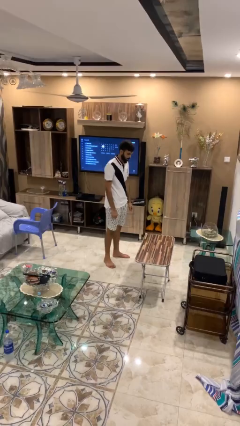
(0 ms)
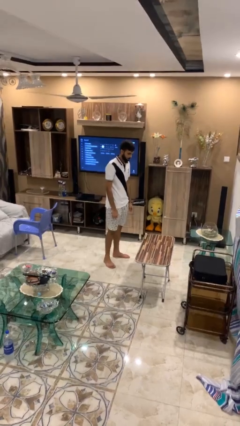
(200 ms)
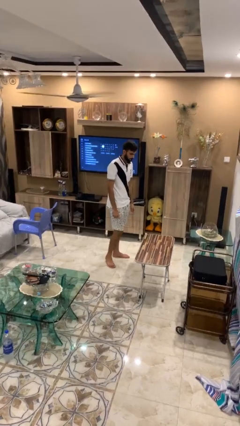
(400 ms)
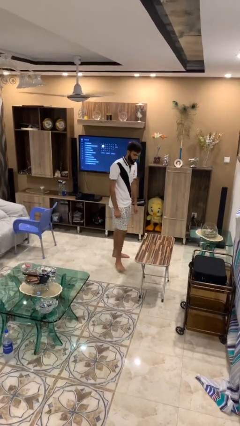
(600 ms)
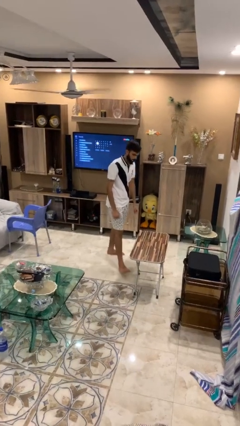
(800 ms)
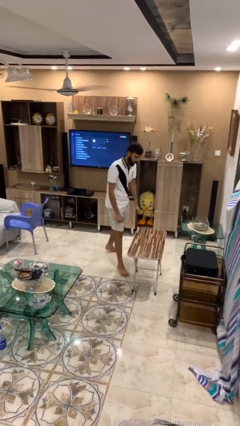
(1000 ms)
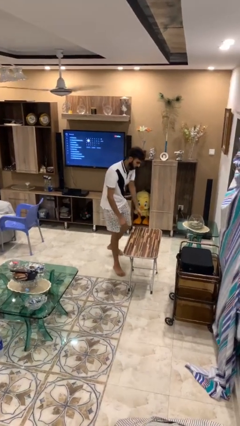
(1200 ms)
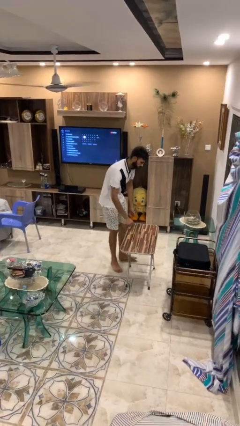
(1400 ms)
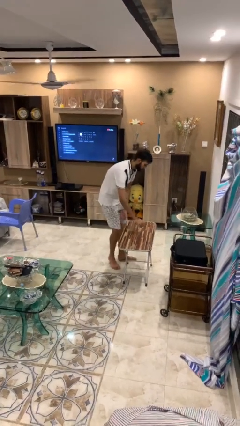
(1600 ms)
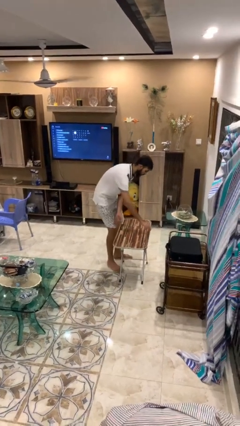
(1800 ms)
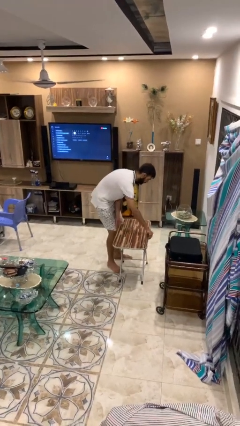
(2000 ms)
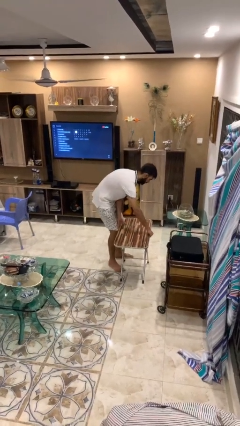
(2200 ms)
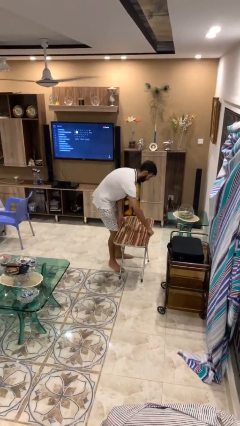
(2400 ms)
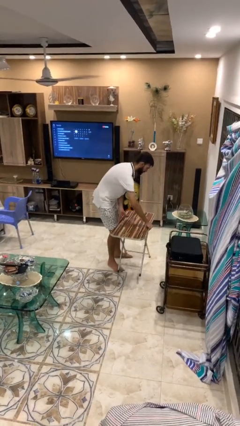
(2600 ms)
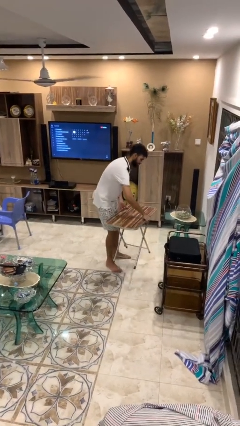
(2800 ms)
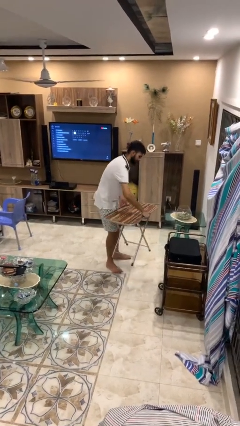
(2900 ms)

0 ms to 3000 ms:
person picks up object from floor

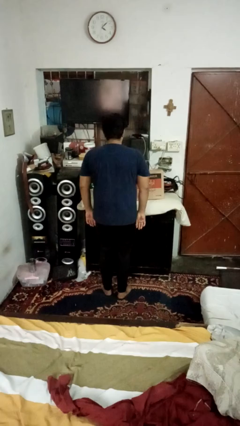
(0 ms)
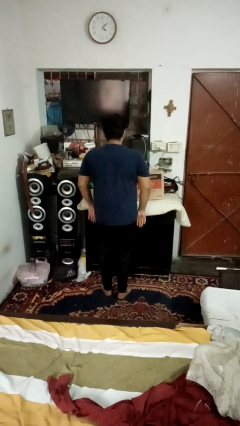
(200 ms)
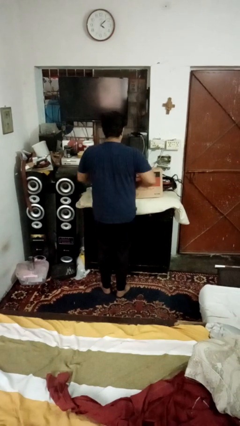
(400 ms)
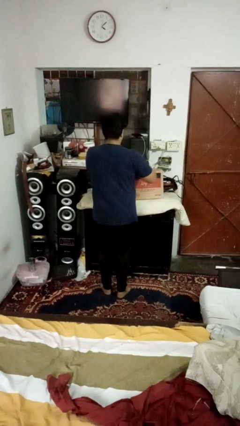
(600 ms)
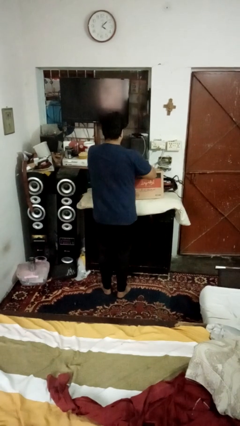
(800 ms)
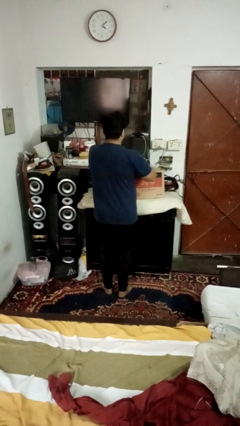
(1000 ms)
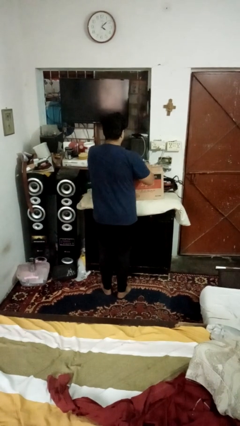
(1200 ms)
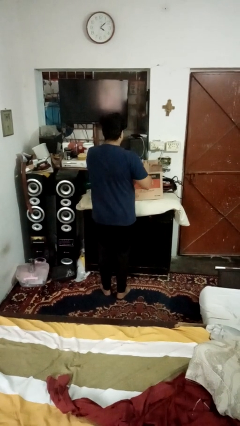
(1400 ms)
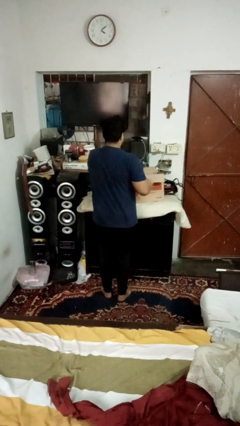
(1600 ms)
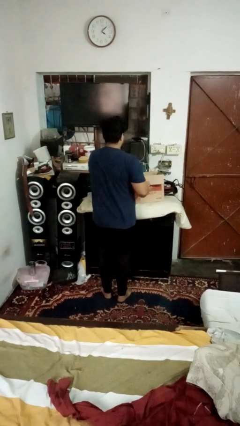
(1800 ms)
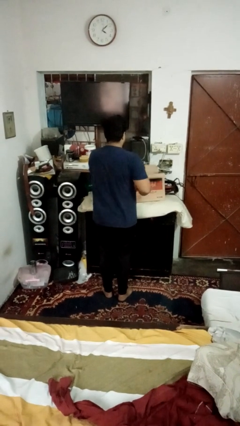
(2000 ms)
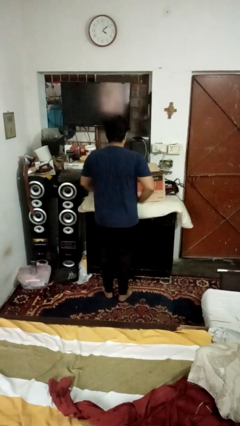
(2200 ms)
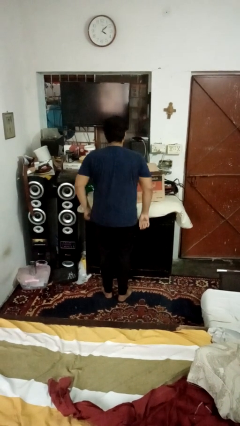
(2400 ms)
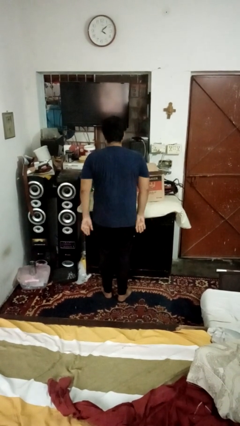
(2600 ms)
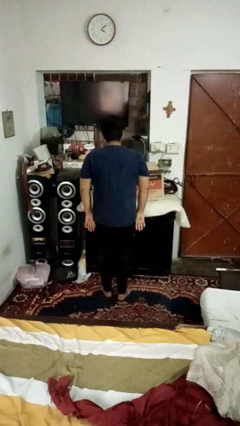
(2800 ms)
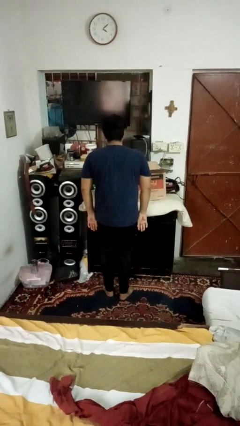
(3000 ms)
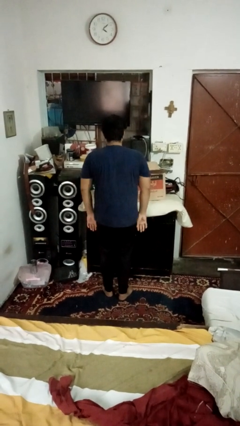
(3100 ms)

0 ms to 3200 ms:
person opens box

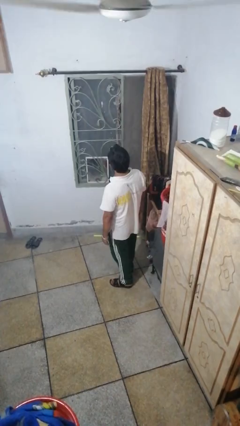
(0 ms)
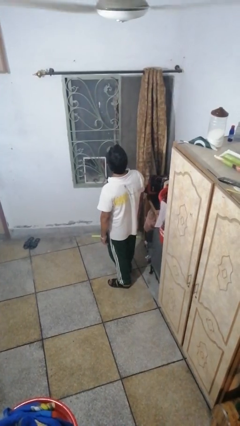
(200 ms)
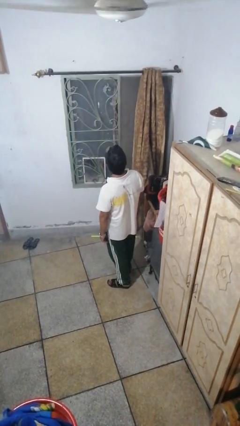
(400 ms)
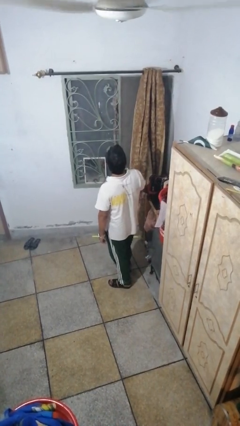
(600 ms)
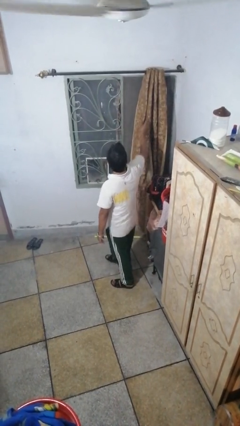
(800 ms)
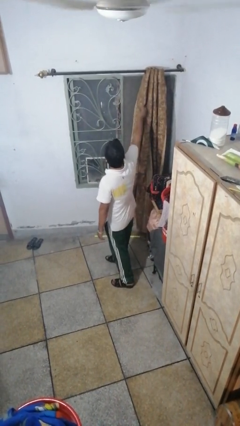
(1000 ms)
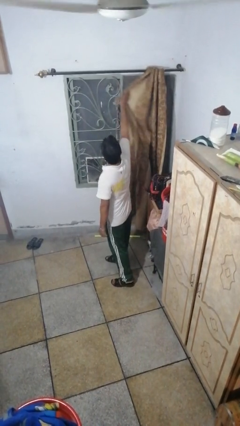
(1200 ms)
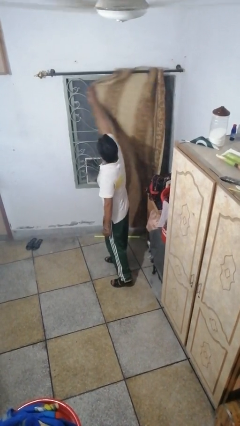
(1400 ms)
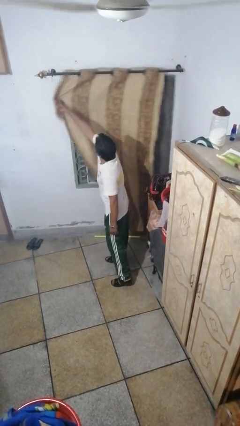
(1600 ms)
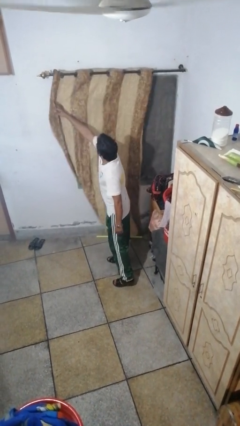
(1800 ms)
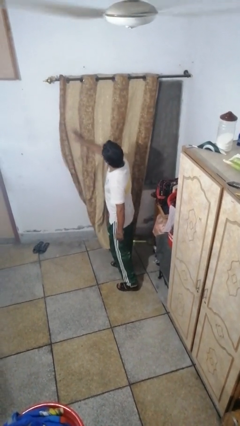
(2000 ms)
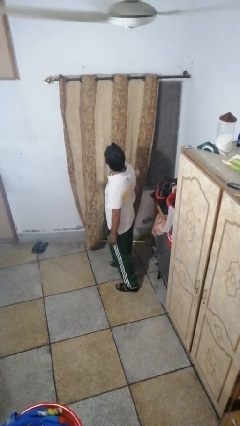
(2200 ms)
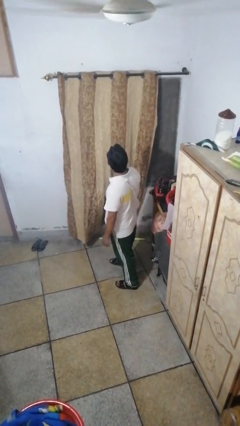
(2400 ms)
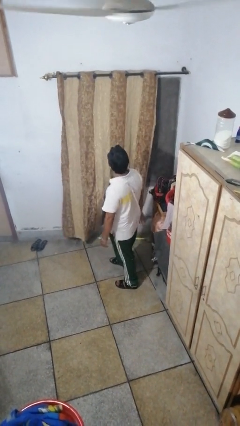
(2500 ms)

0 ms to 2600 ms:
person closes curtains

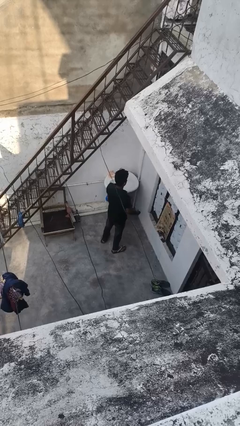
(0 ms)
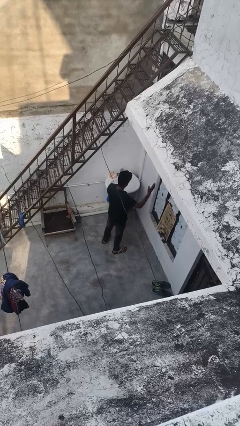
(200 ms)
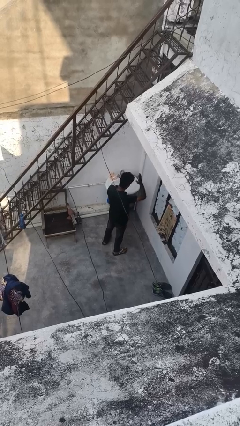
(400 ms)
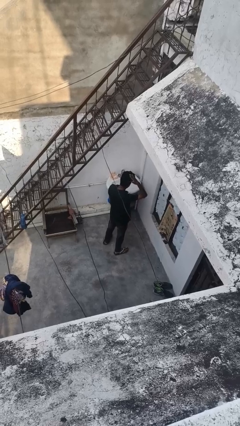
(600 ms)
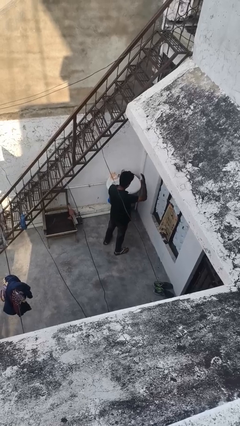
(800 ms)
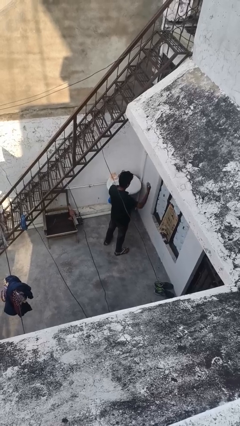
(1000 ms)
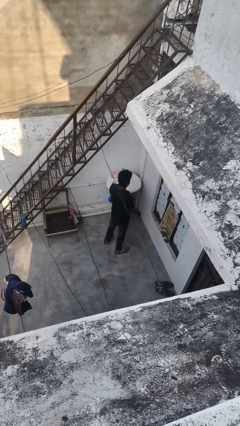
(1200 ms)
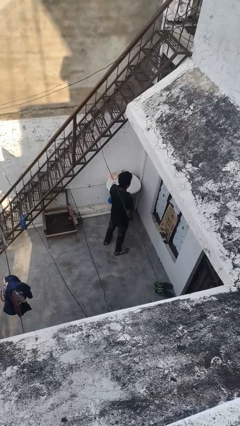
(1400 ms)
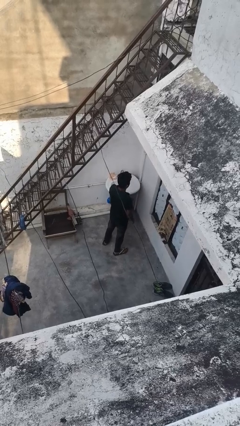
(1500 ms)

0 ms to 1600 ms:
person pats head

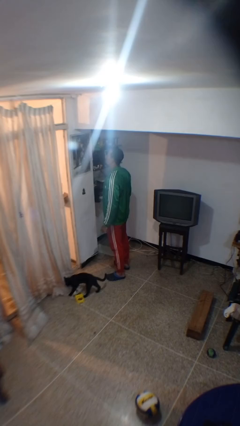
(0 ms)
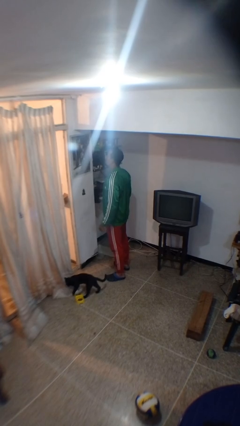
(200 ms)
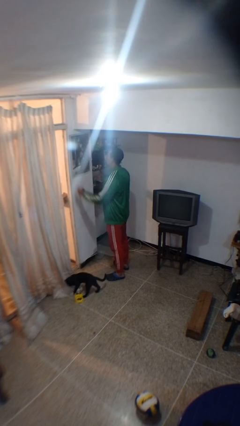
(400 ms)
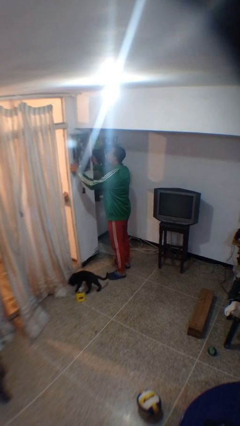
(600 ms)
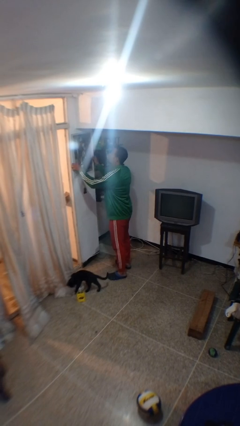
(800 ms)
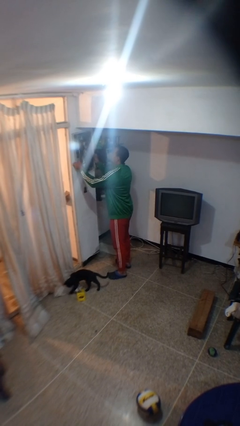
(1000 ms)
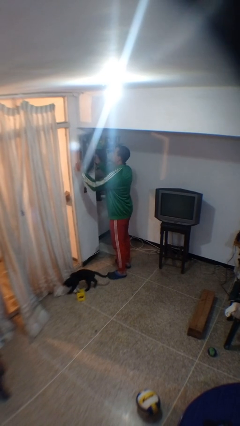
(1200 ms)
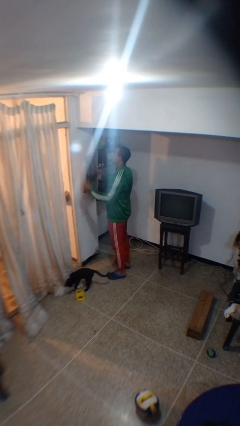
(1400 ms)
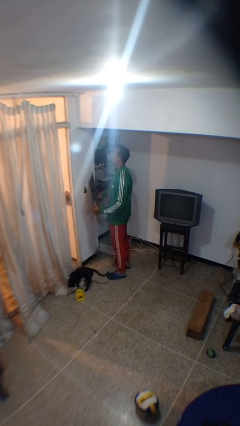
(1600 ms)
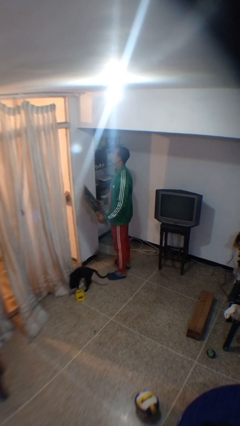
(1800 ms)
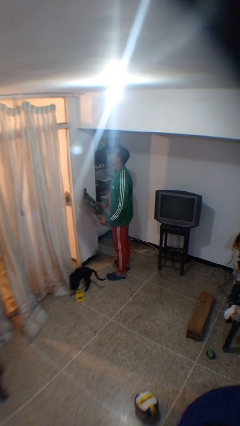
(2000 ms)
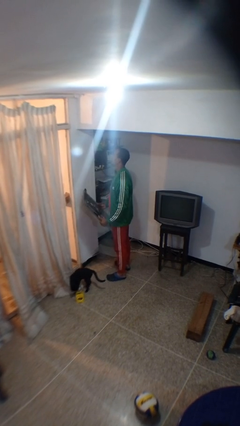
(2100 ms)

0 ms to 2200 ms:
person takes down picture frame

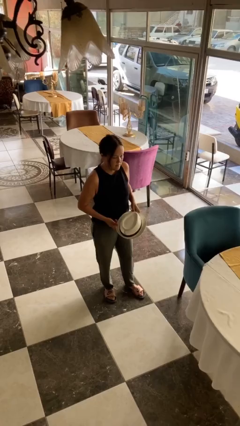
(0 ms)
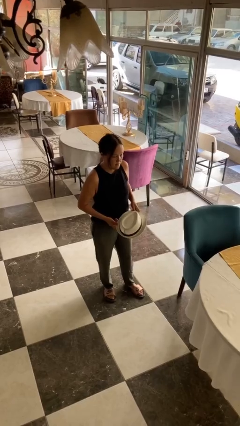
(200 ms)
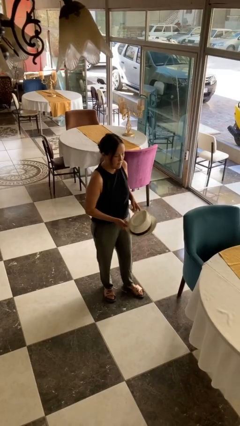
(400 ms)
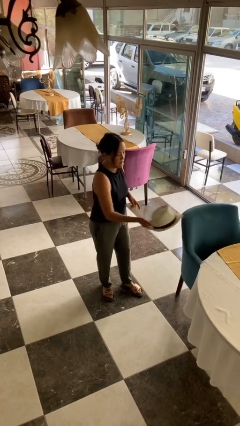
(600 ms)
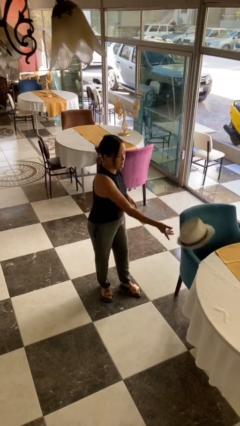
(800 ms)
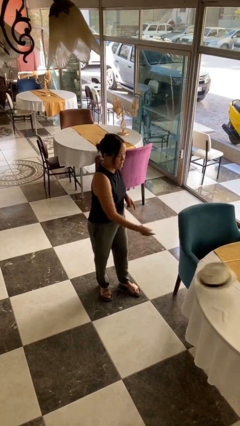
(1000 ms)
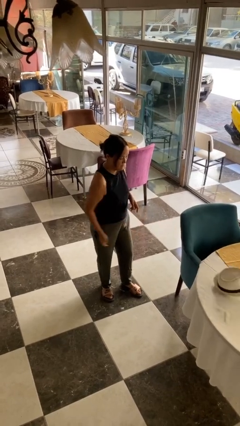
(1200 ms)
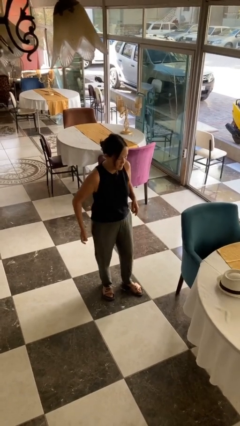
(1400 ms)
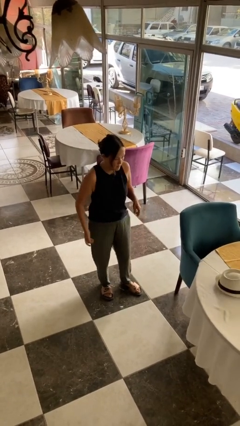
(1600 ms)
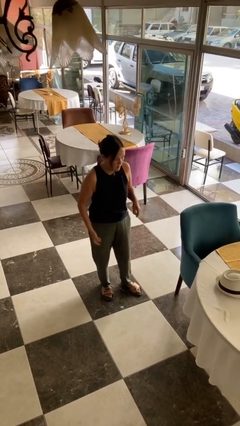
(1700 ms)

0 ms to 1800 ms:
person throws object on table

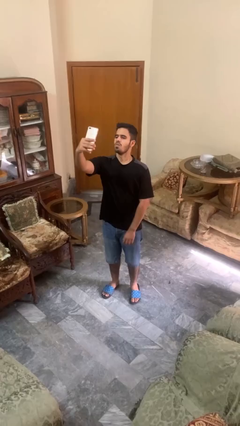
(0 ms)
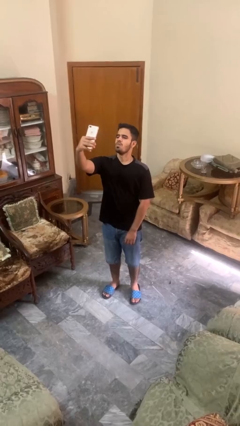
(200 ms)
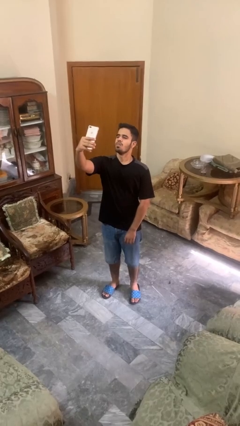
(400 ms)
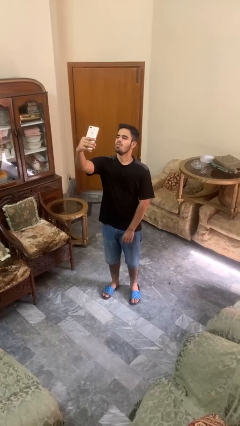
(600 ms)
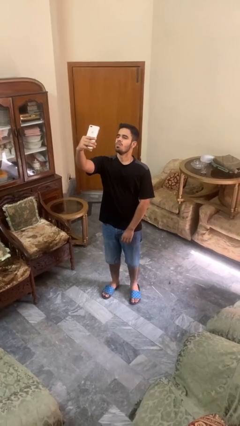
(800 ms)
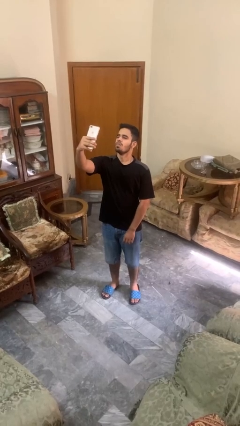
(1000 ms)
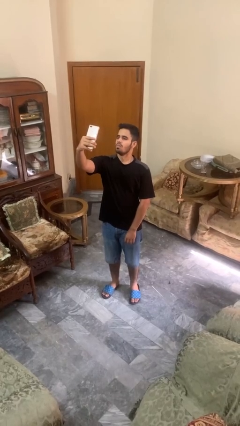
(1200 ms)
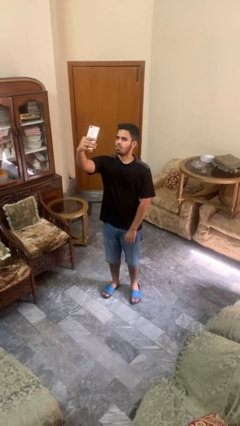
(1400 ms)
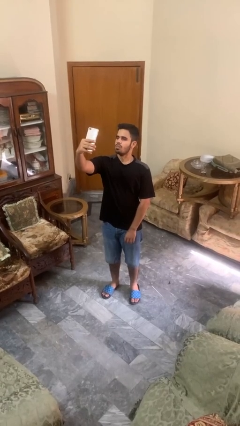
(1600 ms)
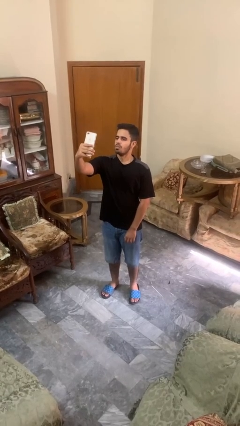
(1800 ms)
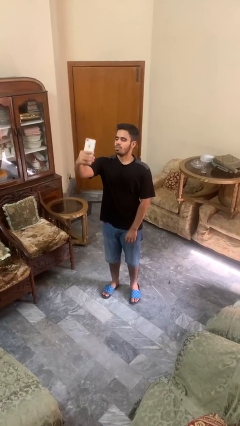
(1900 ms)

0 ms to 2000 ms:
person takes selfie

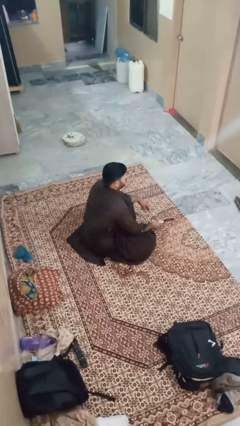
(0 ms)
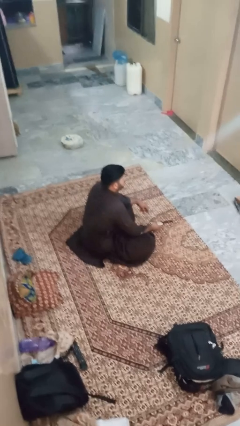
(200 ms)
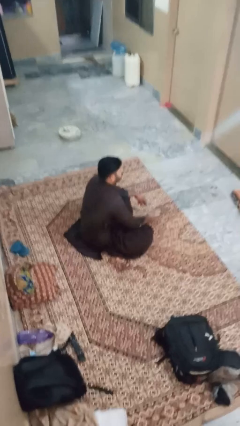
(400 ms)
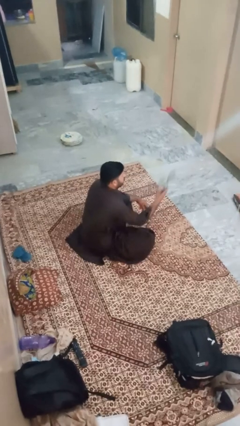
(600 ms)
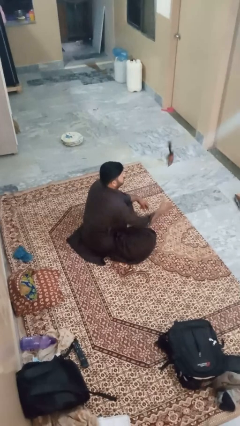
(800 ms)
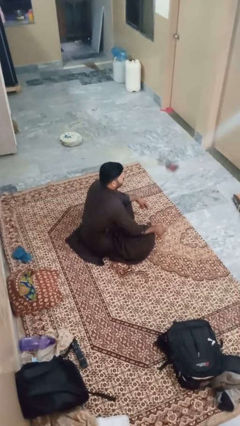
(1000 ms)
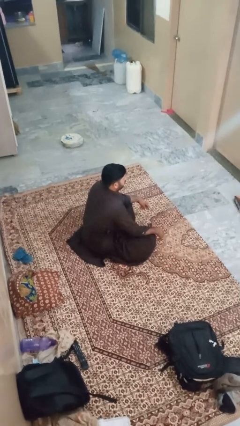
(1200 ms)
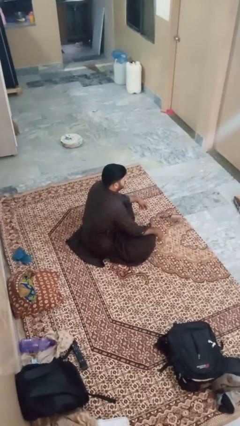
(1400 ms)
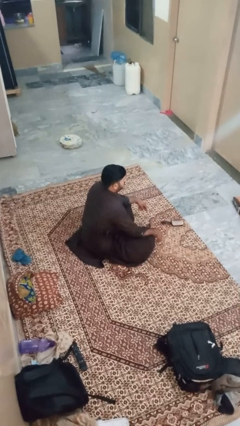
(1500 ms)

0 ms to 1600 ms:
person throws object into air
